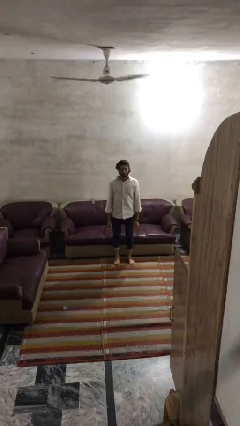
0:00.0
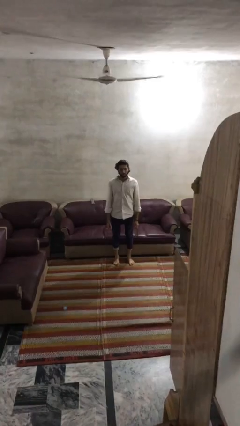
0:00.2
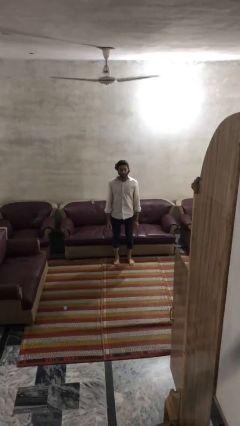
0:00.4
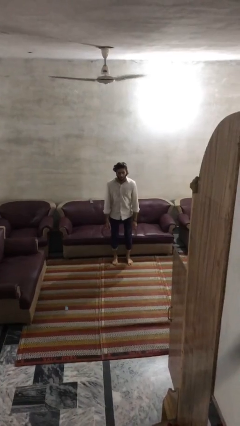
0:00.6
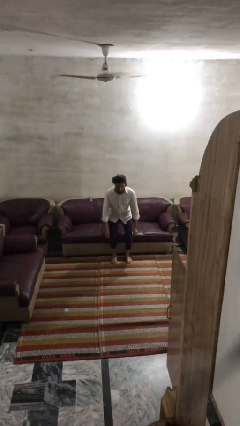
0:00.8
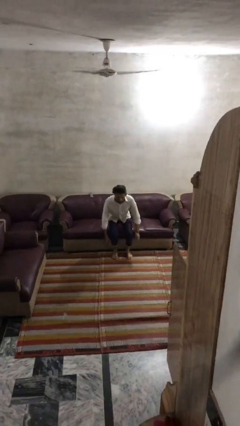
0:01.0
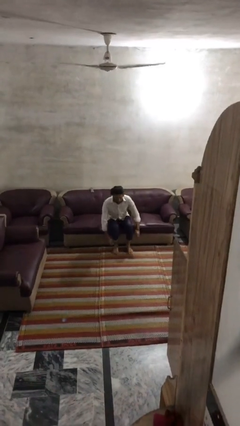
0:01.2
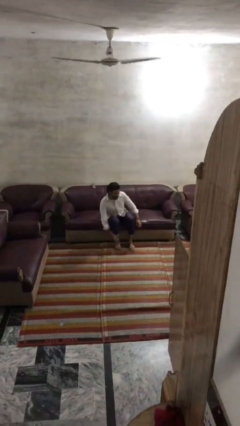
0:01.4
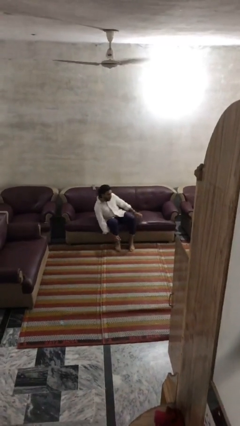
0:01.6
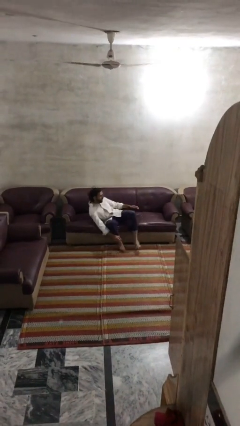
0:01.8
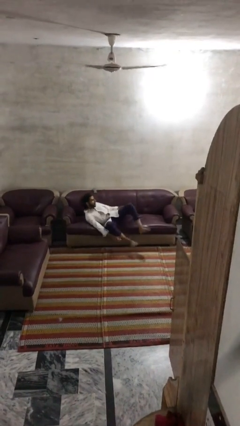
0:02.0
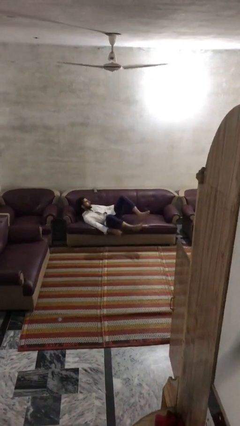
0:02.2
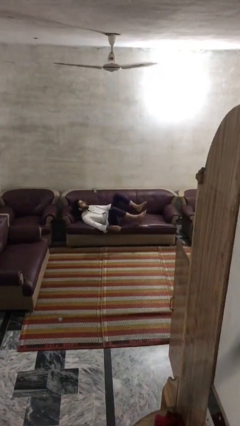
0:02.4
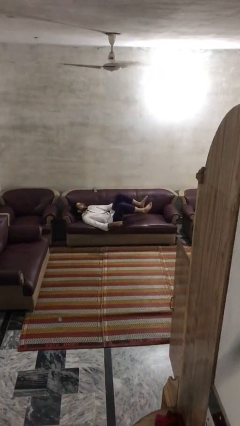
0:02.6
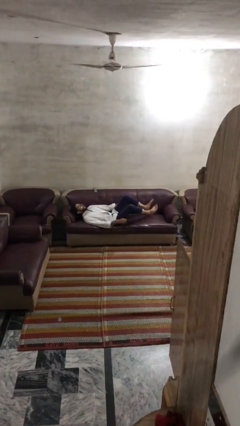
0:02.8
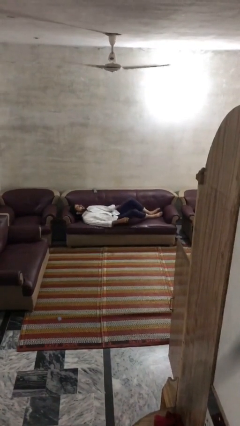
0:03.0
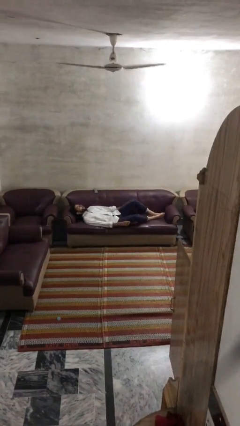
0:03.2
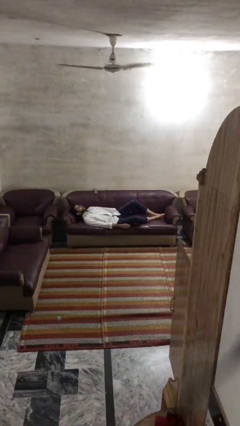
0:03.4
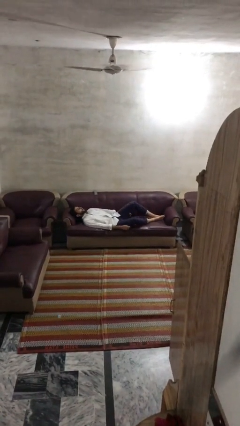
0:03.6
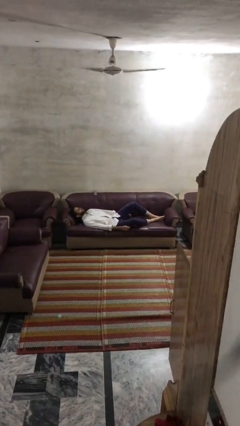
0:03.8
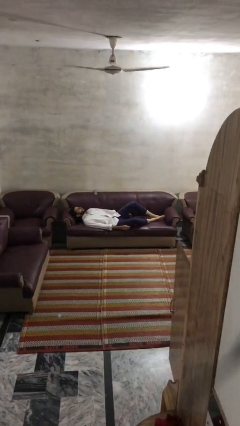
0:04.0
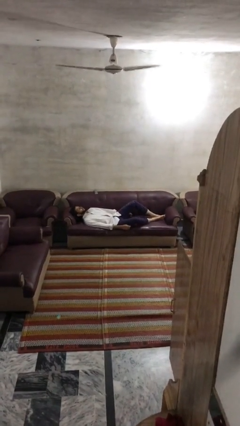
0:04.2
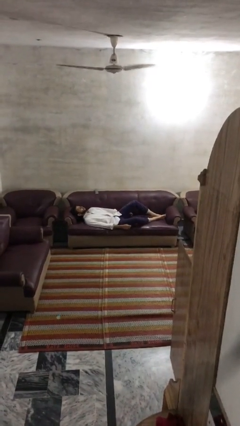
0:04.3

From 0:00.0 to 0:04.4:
person lies down on couch

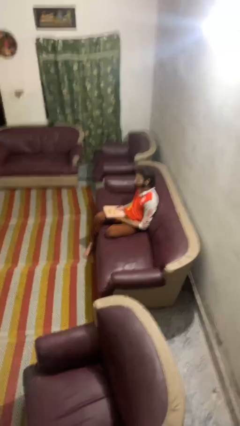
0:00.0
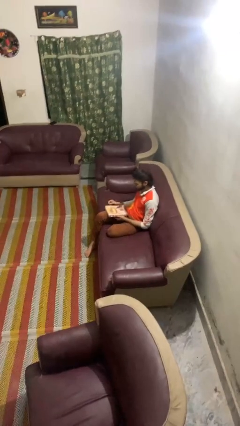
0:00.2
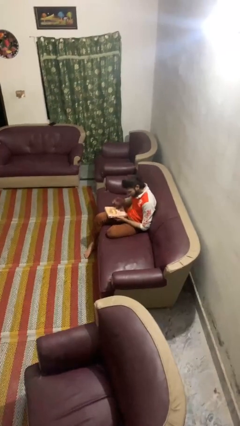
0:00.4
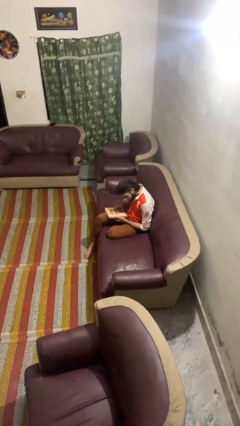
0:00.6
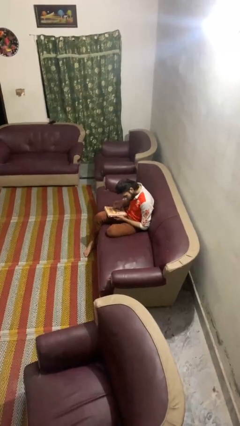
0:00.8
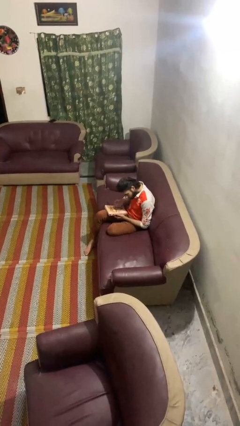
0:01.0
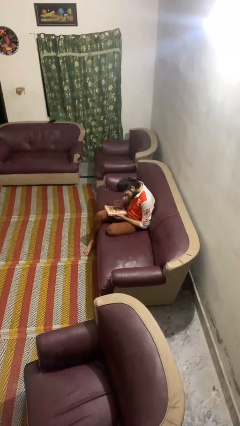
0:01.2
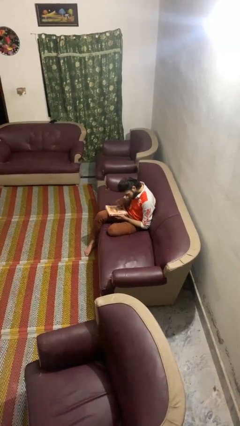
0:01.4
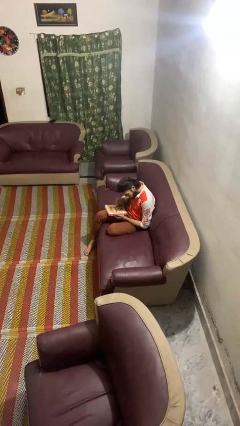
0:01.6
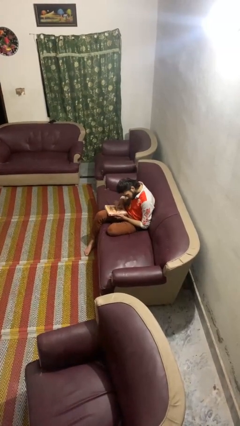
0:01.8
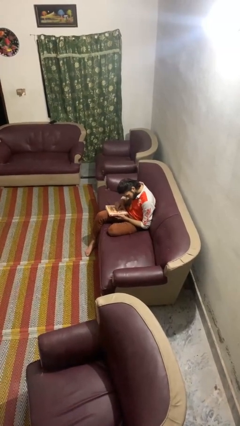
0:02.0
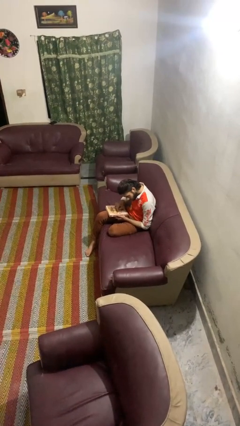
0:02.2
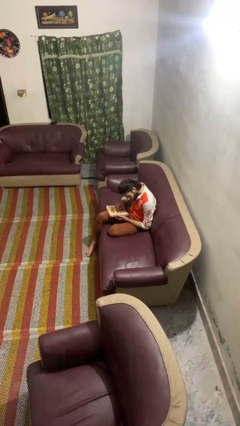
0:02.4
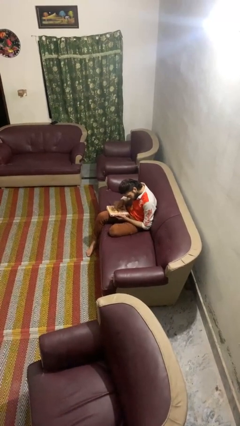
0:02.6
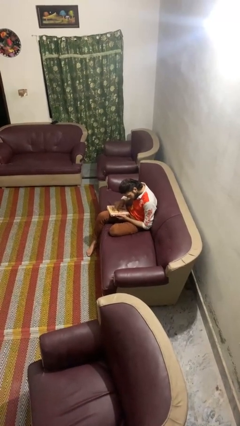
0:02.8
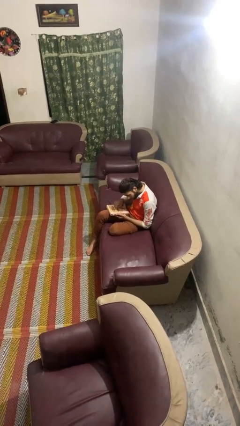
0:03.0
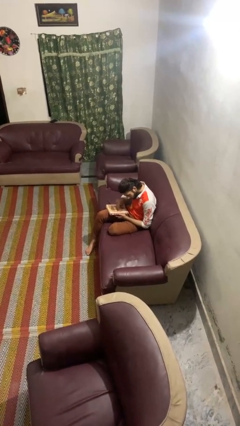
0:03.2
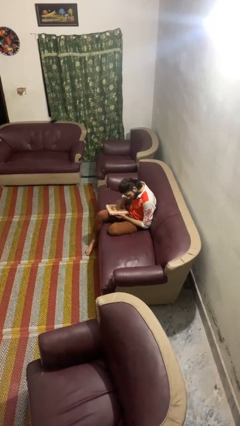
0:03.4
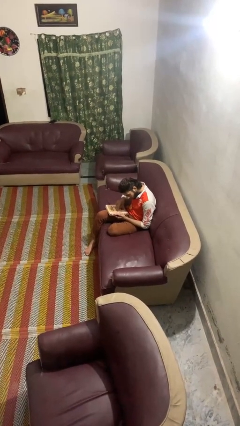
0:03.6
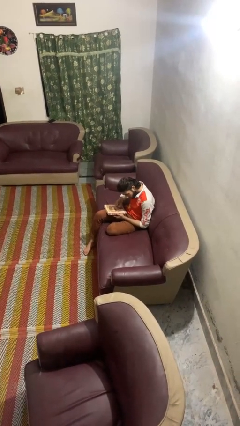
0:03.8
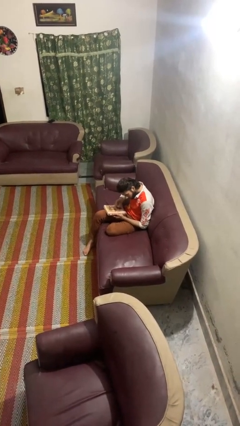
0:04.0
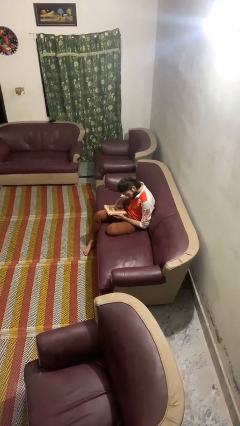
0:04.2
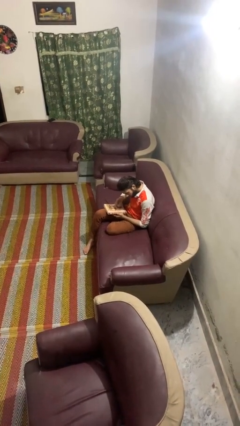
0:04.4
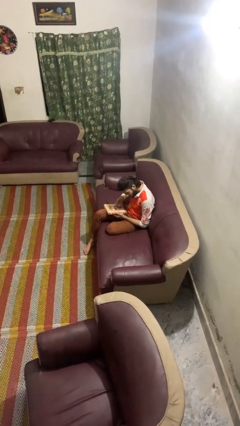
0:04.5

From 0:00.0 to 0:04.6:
person taps object with finger

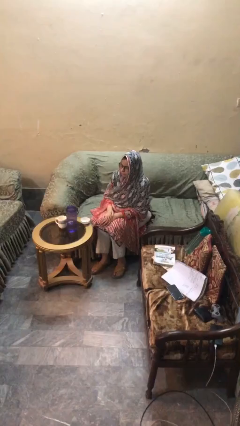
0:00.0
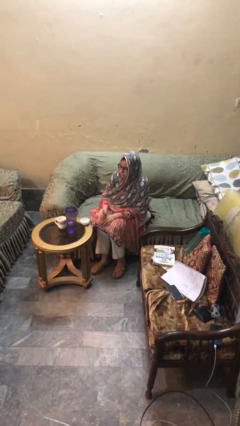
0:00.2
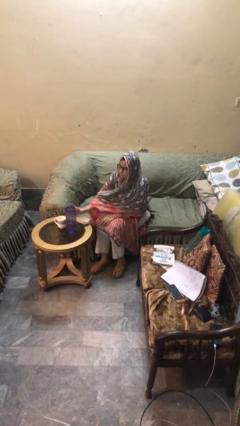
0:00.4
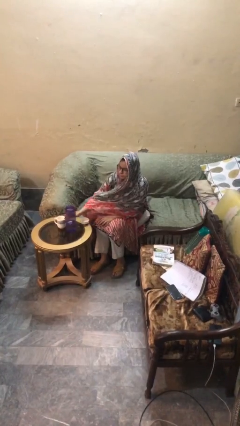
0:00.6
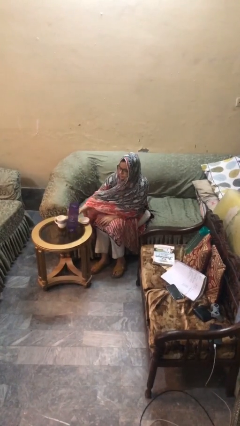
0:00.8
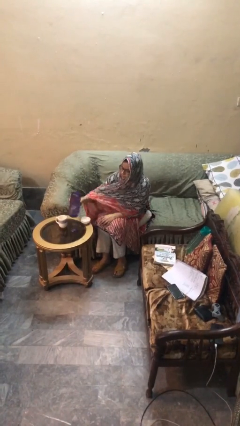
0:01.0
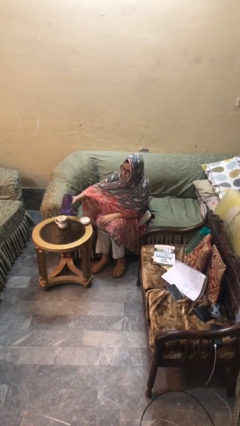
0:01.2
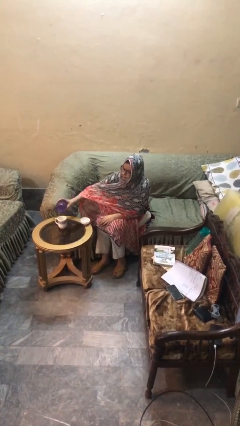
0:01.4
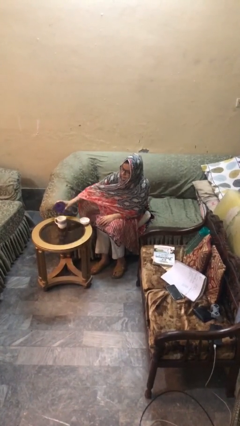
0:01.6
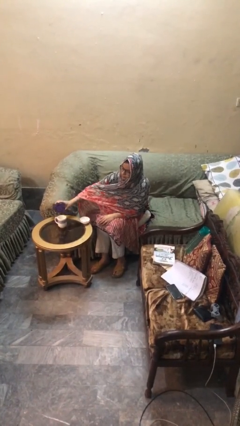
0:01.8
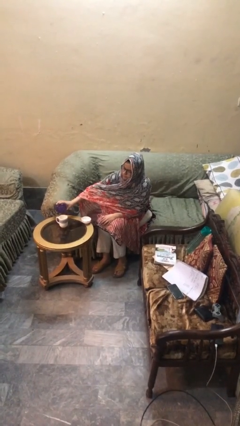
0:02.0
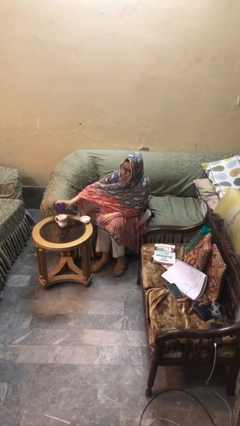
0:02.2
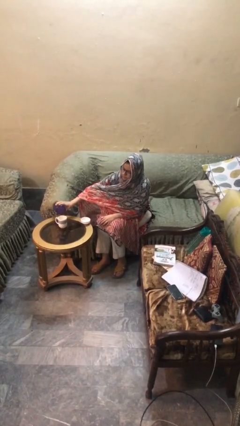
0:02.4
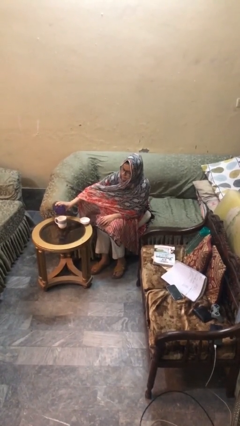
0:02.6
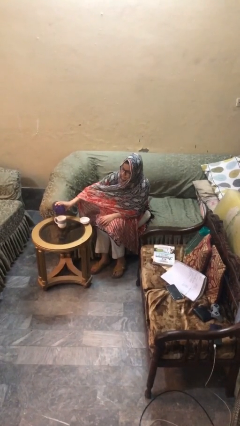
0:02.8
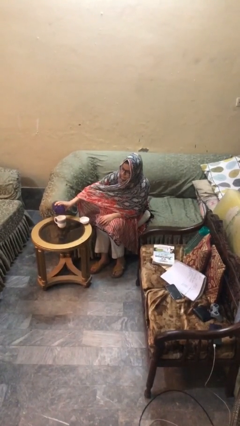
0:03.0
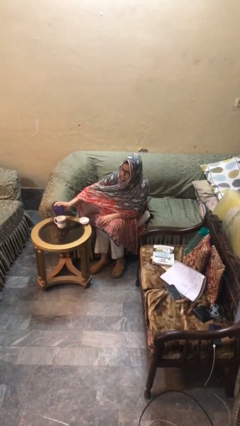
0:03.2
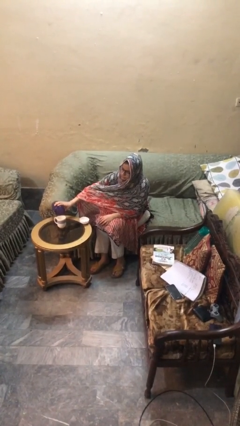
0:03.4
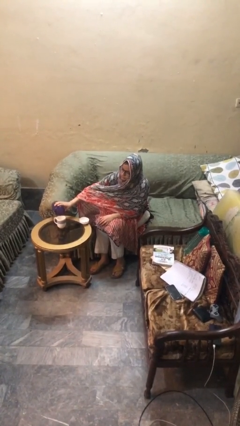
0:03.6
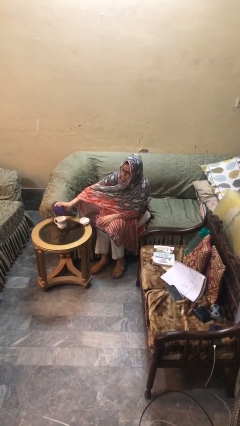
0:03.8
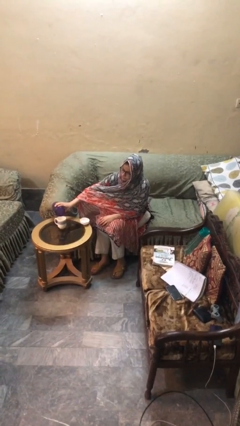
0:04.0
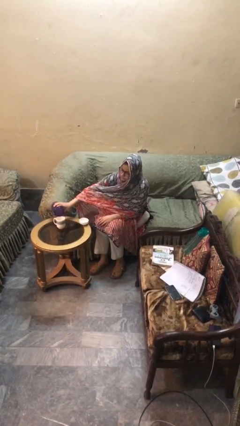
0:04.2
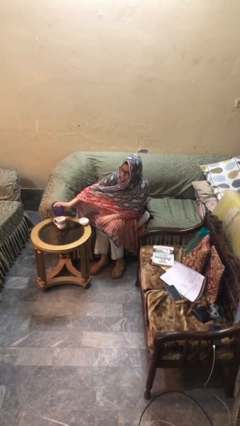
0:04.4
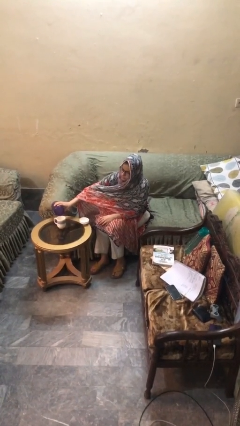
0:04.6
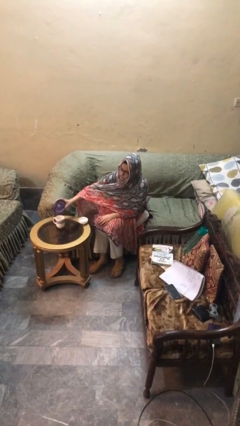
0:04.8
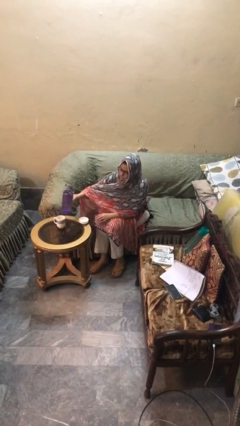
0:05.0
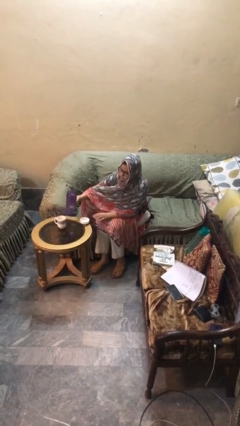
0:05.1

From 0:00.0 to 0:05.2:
person pours liquid into cup

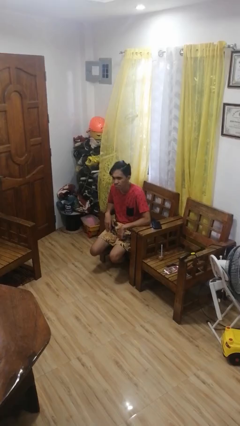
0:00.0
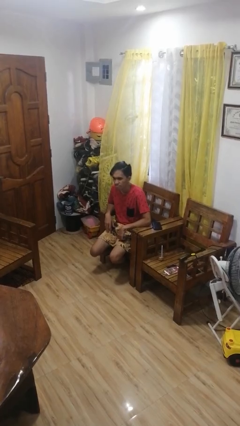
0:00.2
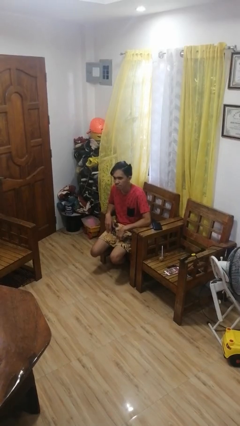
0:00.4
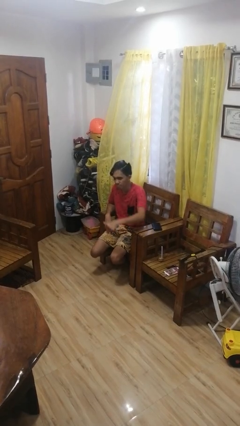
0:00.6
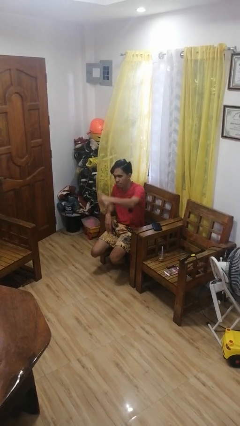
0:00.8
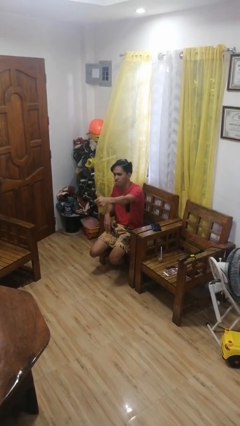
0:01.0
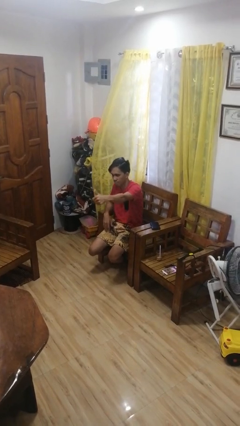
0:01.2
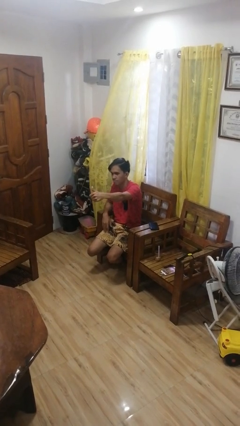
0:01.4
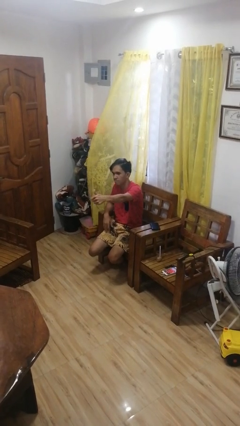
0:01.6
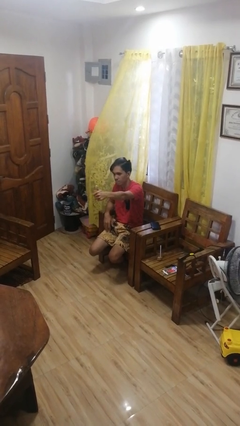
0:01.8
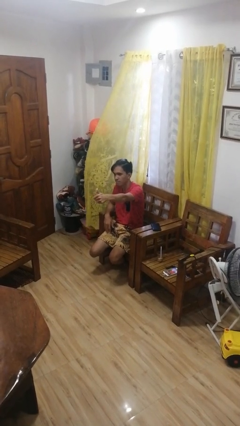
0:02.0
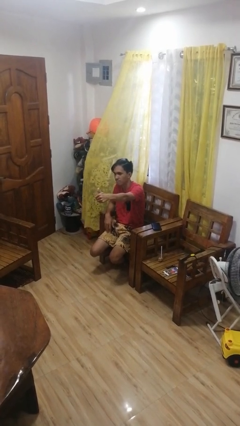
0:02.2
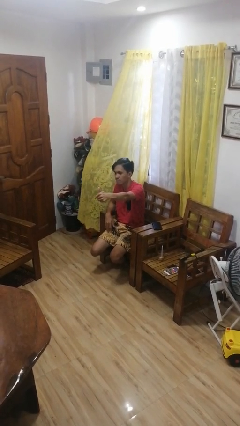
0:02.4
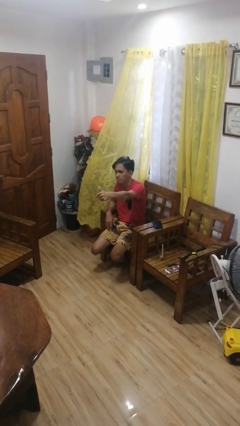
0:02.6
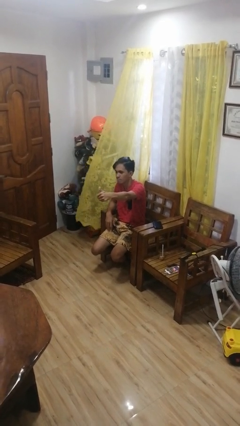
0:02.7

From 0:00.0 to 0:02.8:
person gestures thumbs up

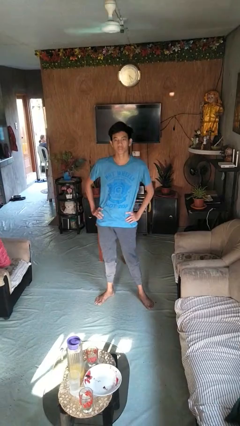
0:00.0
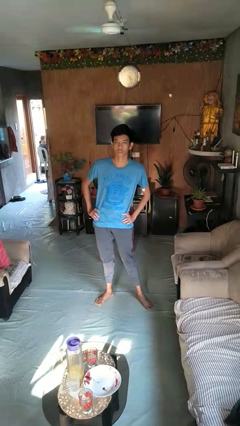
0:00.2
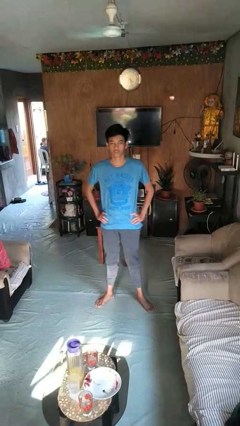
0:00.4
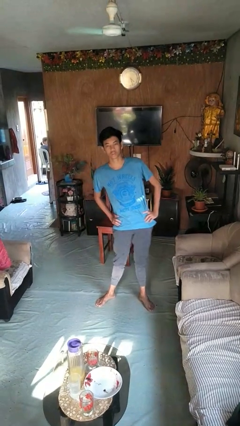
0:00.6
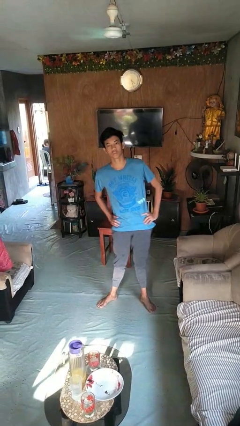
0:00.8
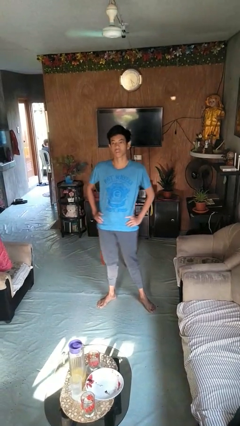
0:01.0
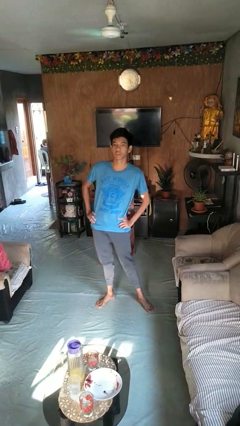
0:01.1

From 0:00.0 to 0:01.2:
person wiggles hips
